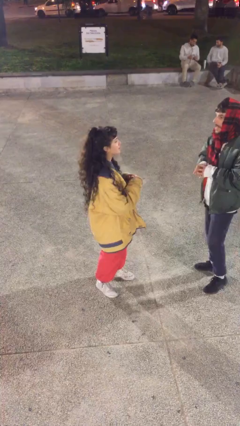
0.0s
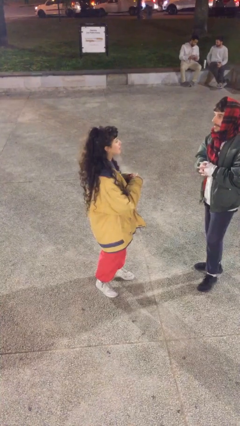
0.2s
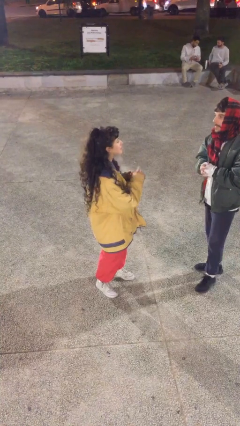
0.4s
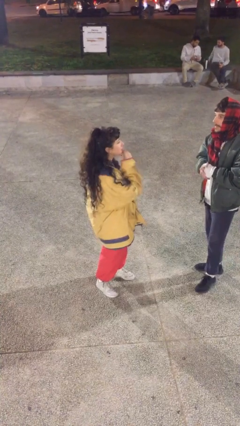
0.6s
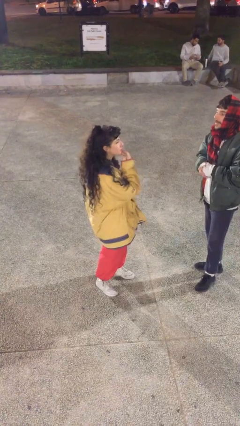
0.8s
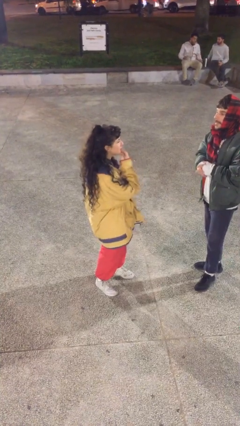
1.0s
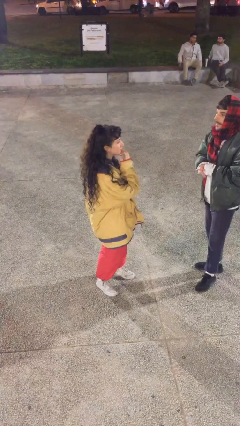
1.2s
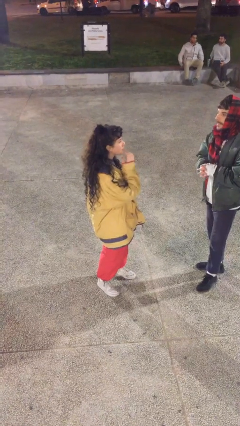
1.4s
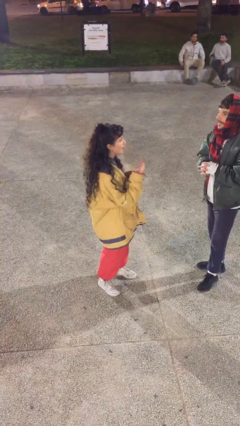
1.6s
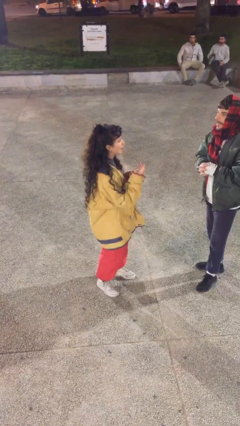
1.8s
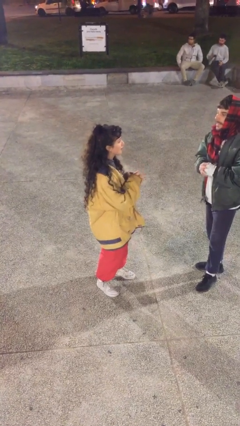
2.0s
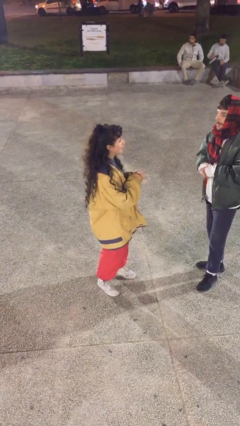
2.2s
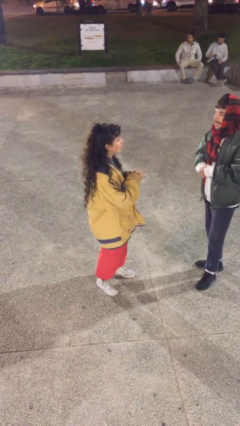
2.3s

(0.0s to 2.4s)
person talks to person

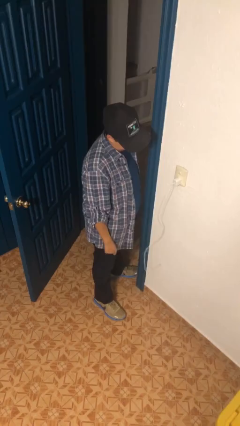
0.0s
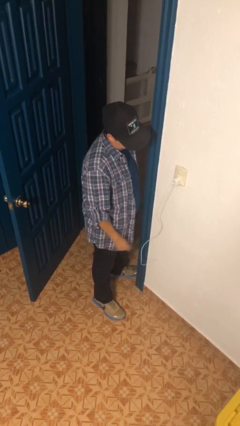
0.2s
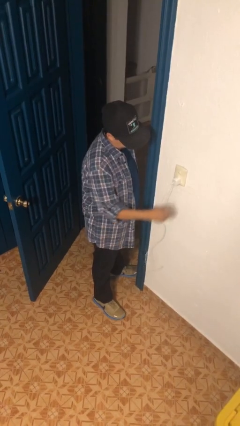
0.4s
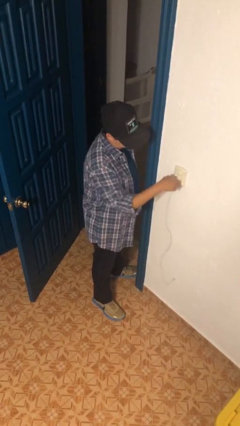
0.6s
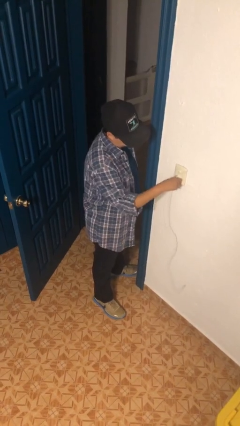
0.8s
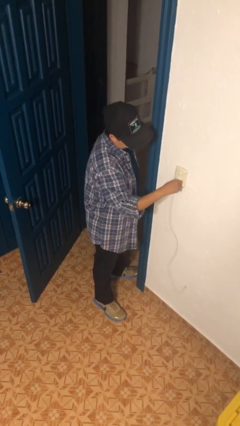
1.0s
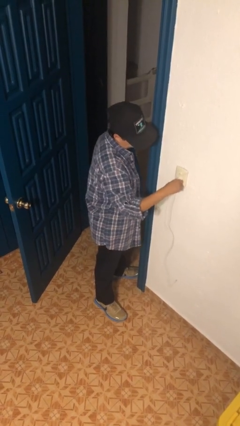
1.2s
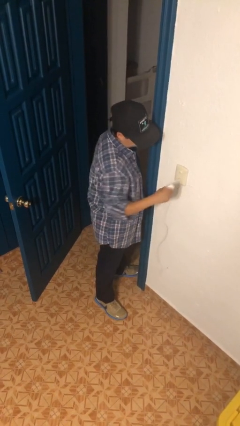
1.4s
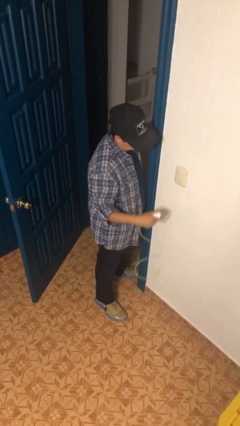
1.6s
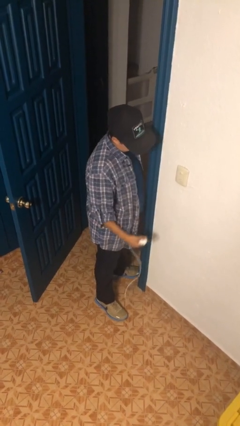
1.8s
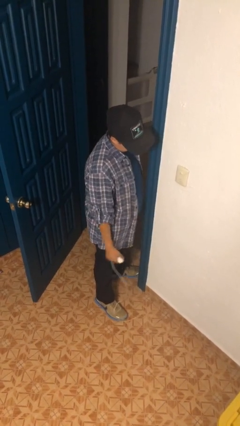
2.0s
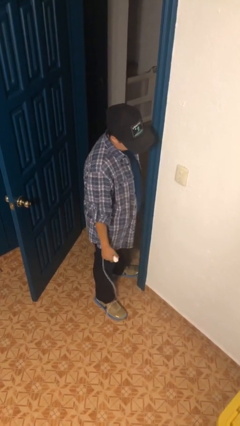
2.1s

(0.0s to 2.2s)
person unplugs from electrical socket

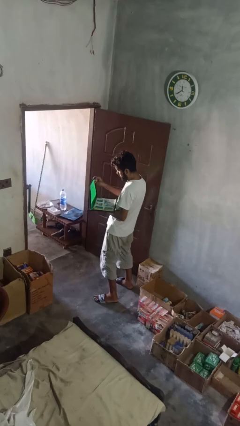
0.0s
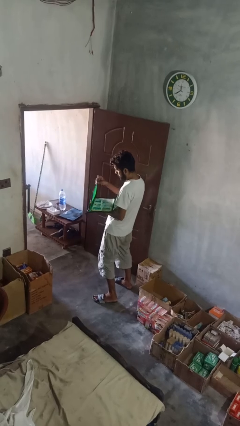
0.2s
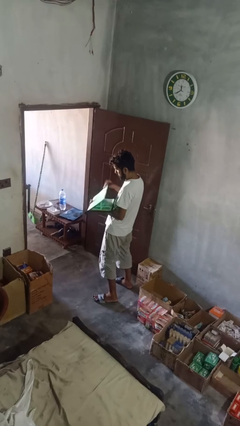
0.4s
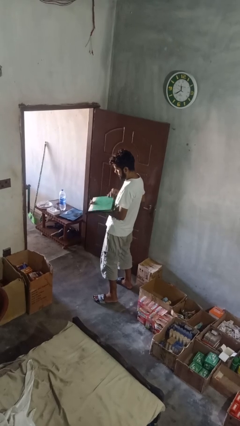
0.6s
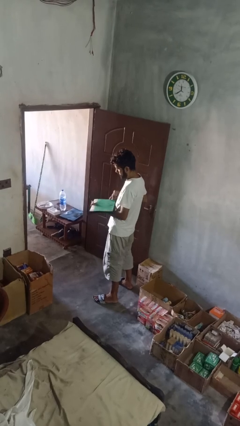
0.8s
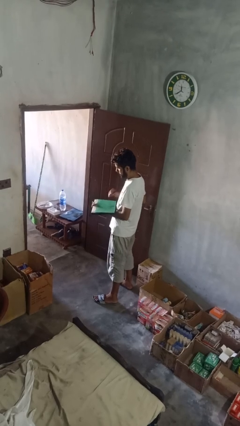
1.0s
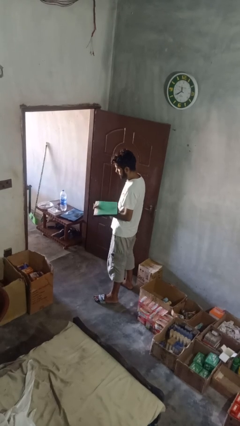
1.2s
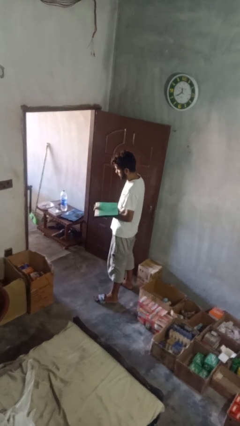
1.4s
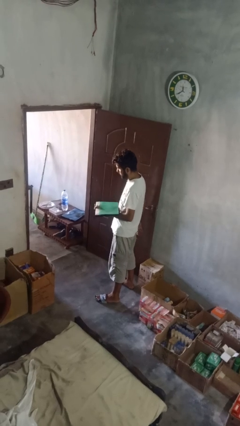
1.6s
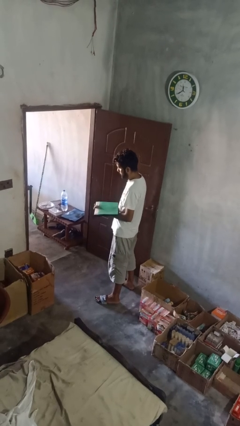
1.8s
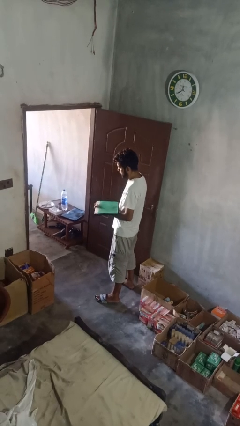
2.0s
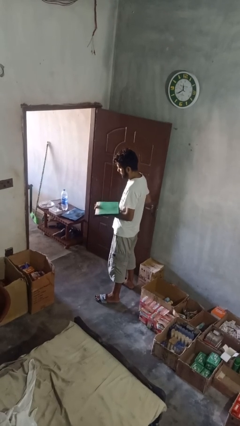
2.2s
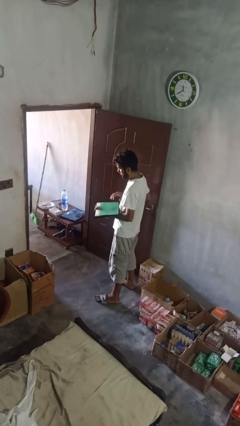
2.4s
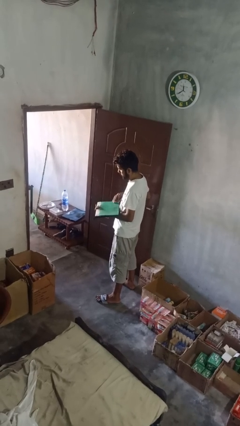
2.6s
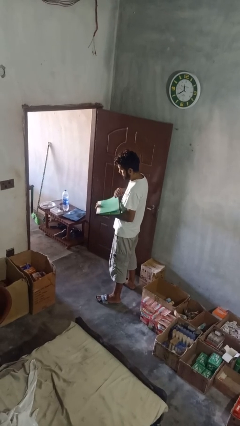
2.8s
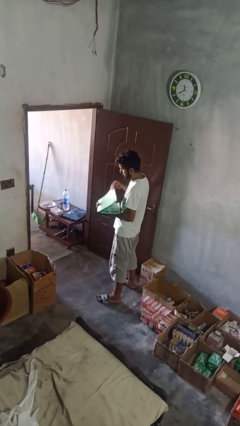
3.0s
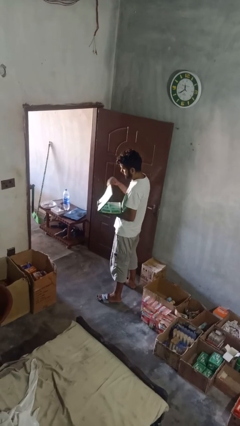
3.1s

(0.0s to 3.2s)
person closes laptop

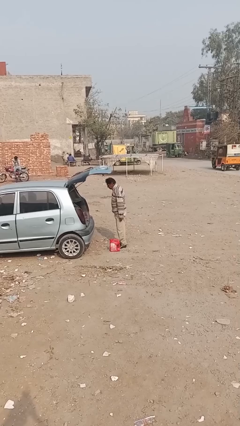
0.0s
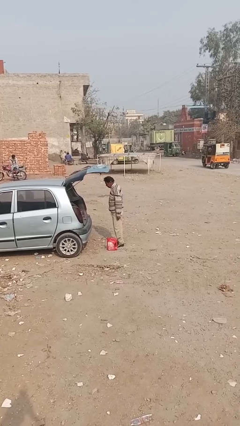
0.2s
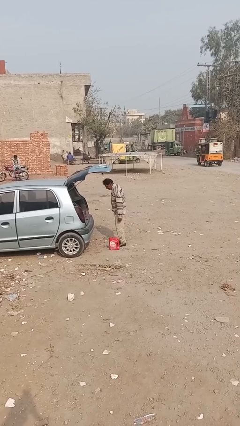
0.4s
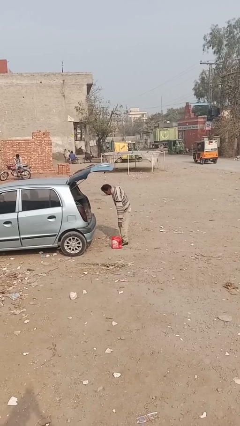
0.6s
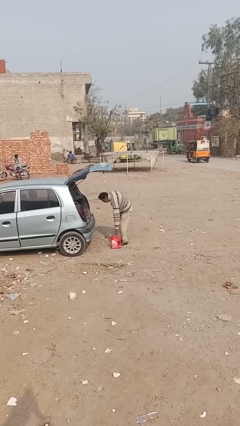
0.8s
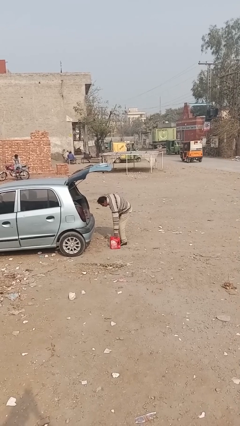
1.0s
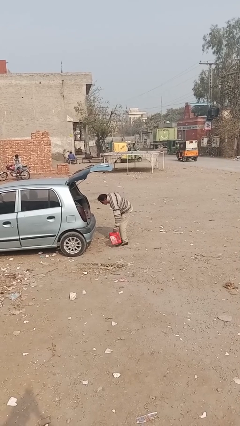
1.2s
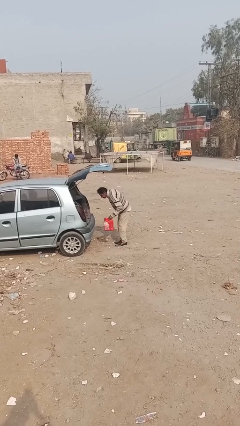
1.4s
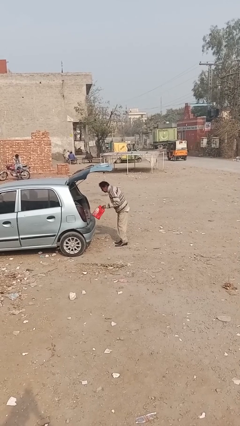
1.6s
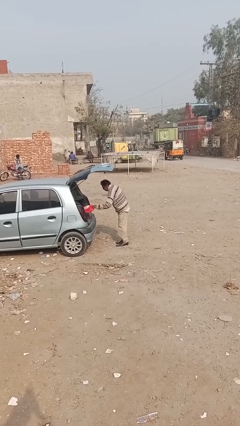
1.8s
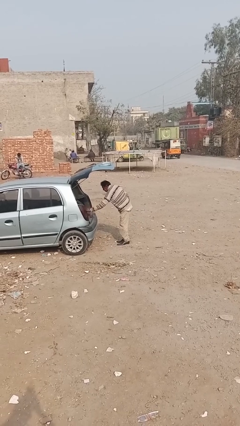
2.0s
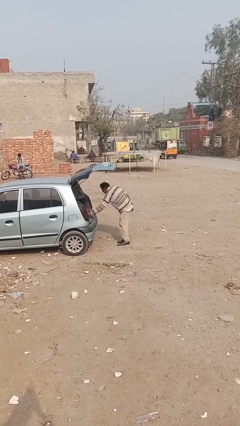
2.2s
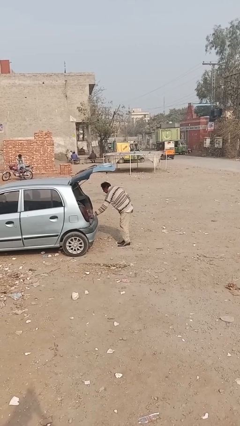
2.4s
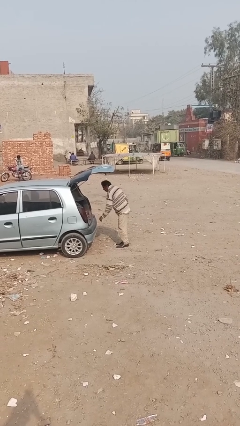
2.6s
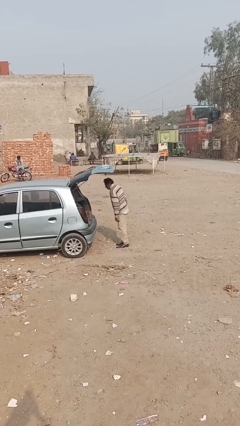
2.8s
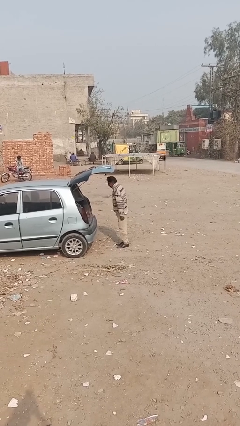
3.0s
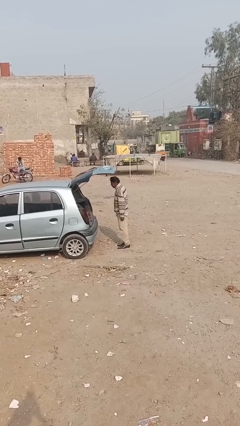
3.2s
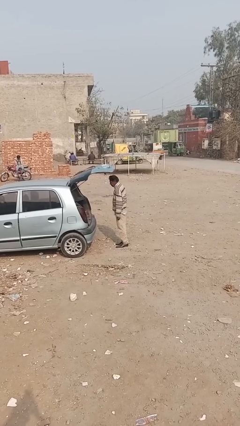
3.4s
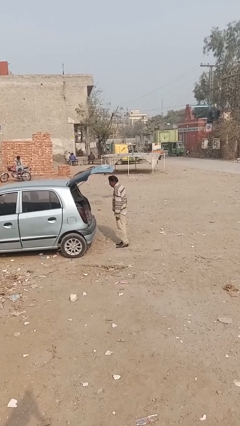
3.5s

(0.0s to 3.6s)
person loads car

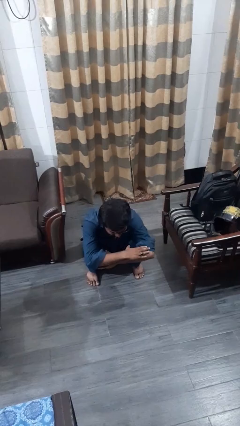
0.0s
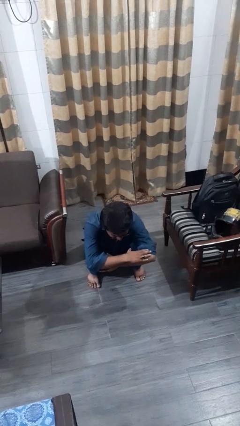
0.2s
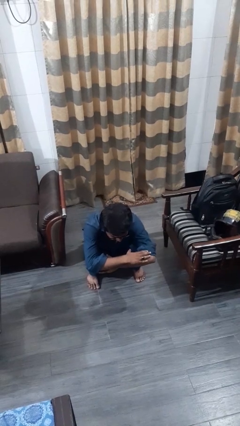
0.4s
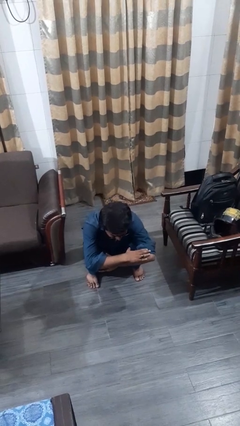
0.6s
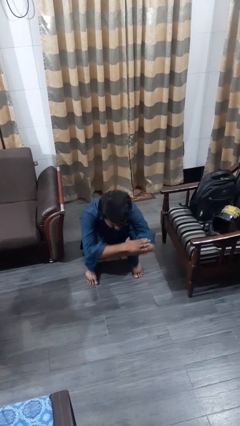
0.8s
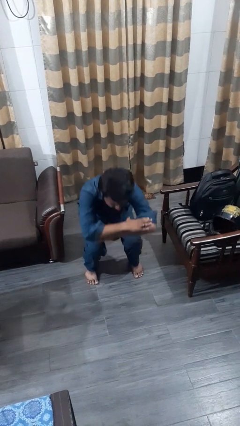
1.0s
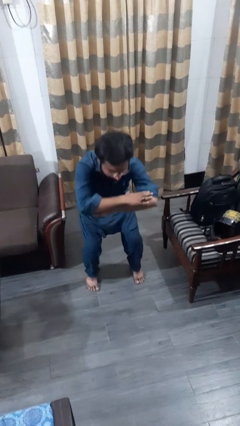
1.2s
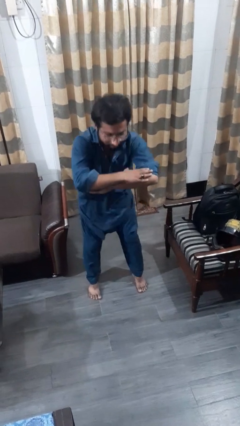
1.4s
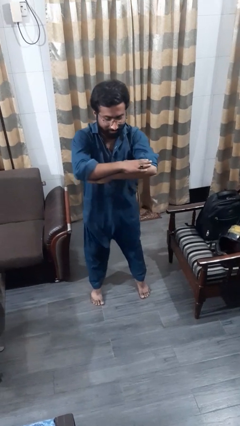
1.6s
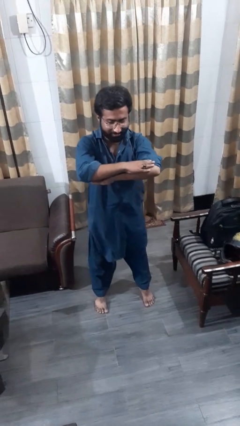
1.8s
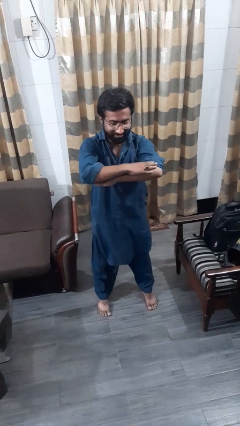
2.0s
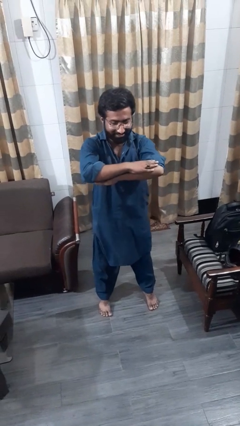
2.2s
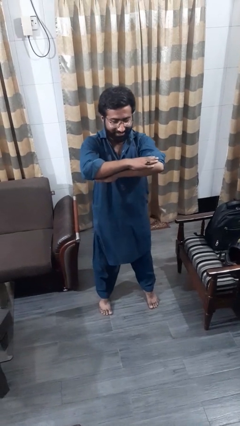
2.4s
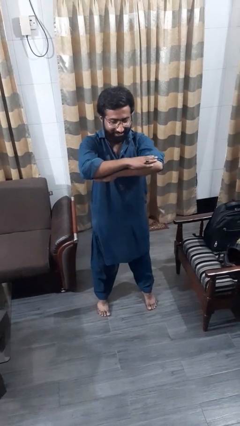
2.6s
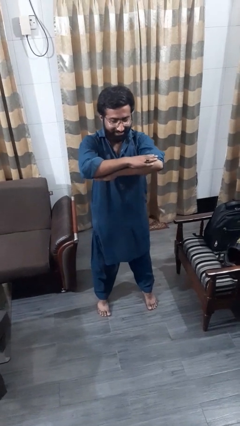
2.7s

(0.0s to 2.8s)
person stands up

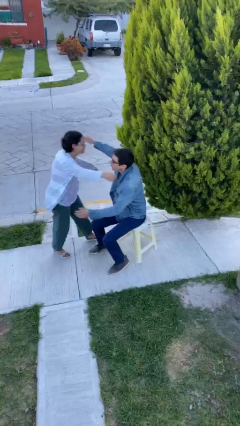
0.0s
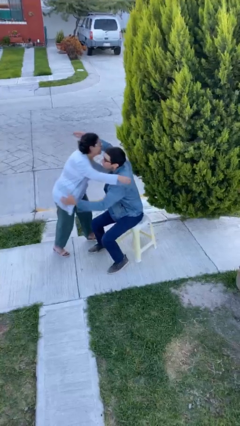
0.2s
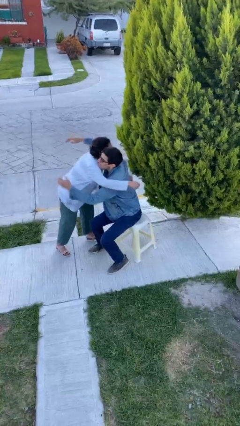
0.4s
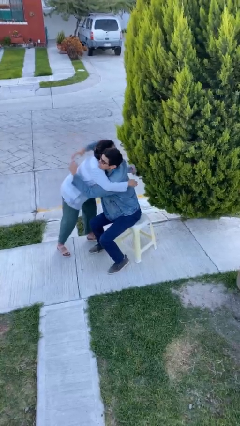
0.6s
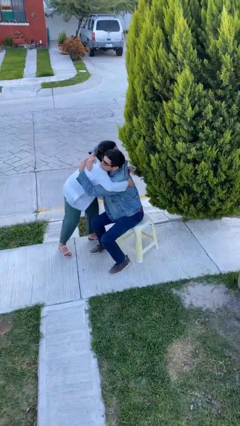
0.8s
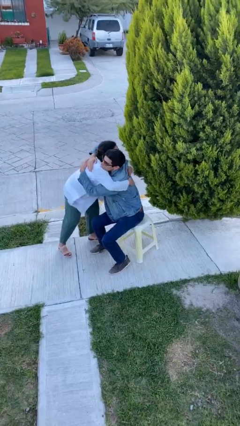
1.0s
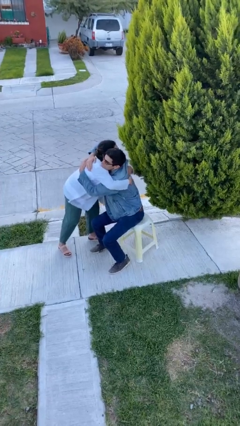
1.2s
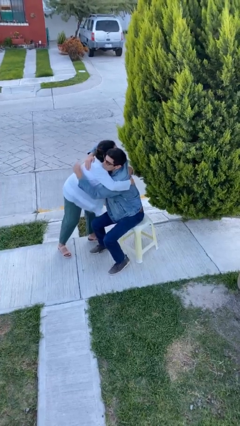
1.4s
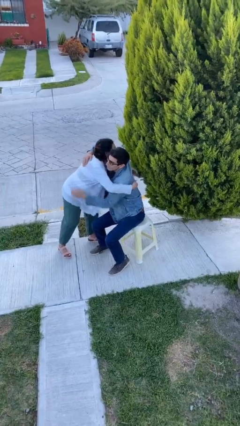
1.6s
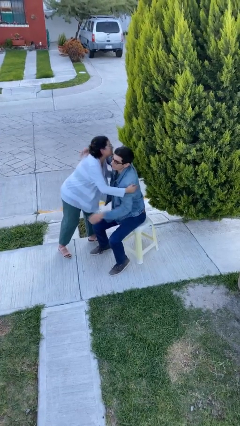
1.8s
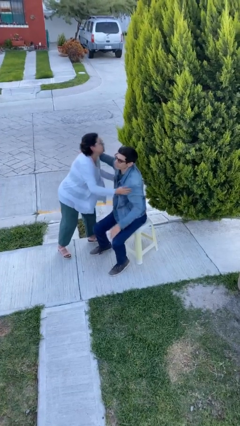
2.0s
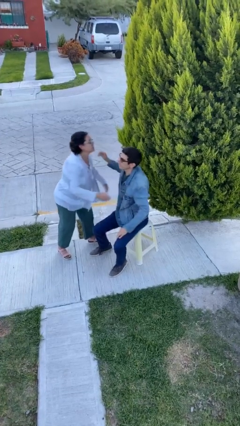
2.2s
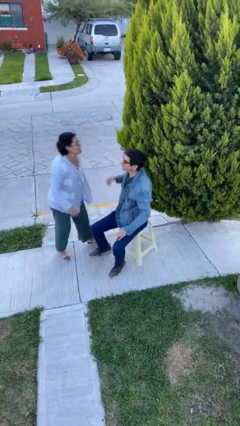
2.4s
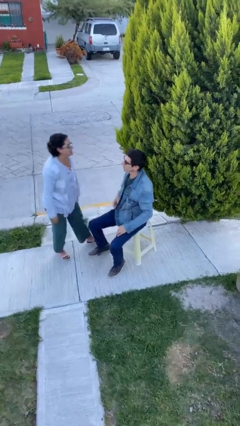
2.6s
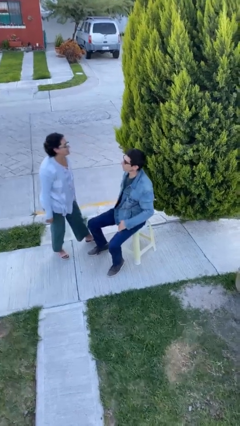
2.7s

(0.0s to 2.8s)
person embraces person

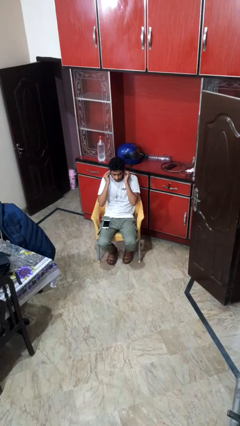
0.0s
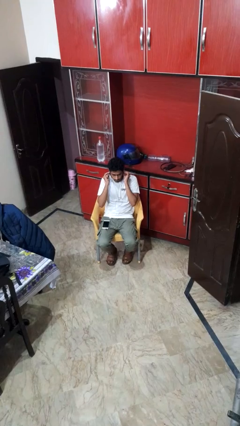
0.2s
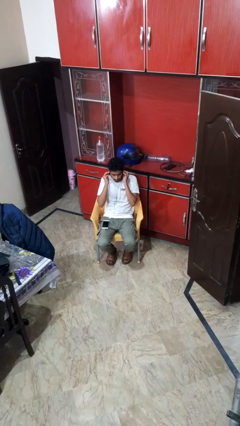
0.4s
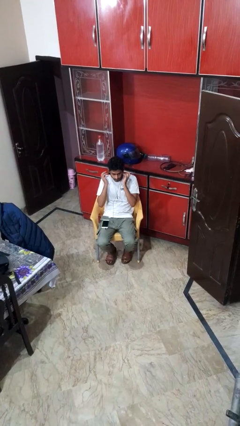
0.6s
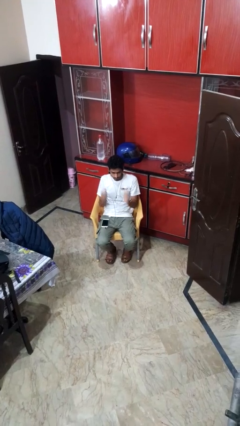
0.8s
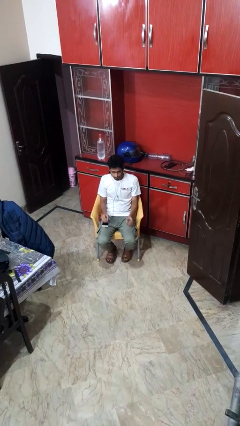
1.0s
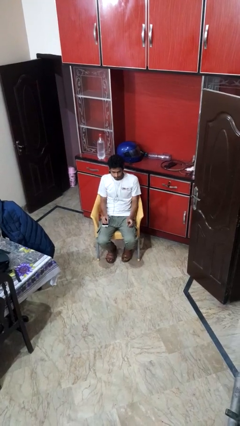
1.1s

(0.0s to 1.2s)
person puts on headphones
